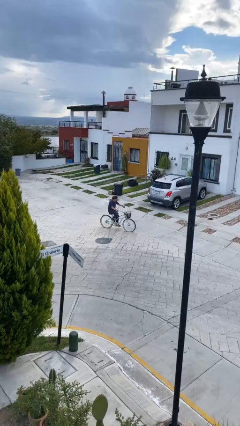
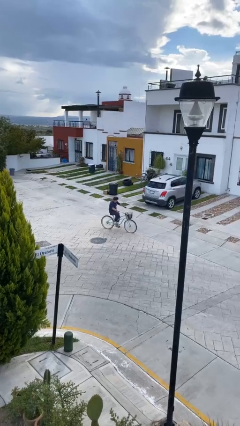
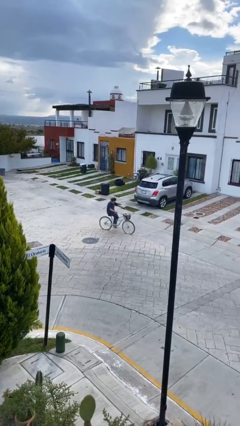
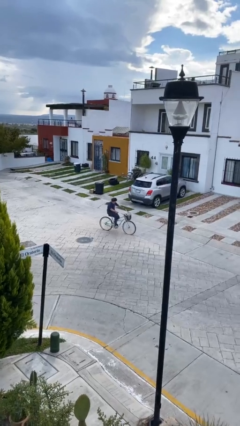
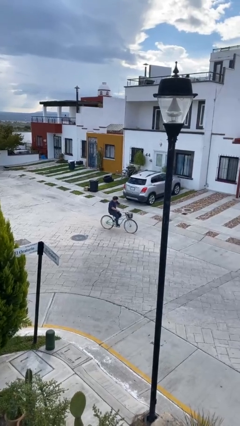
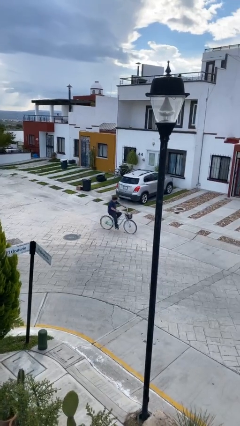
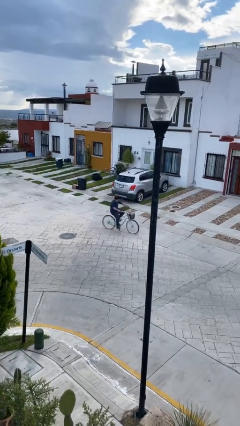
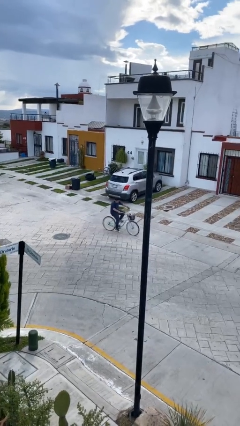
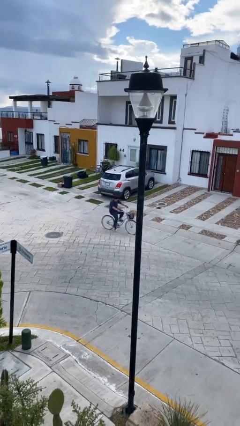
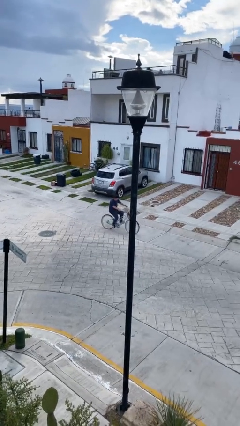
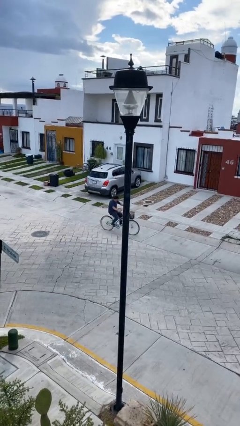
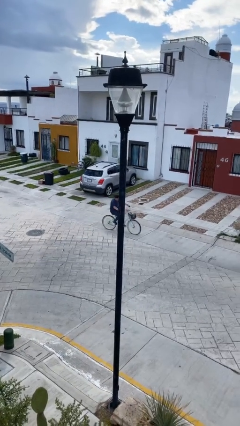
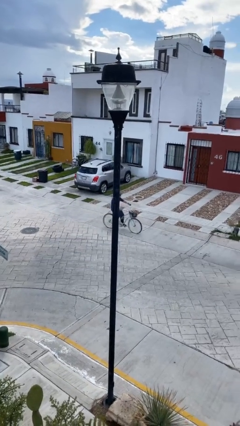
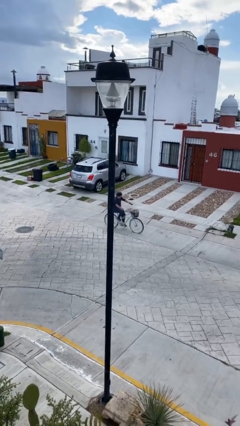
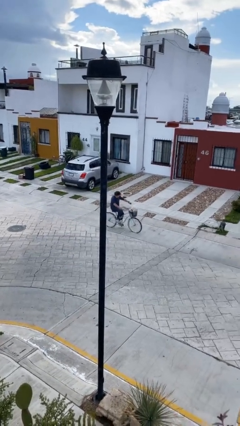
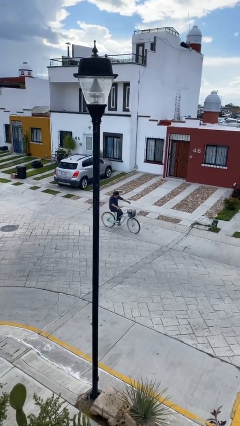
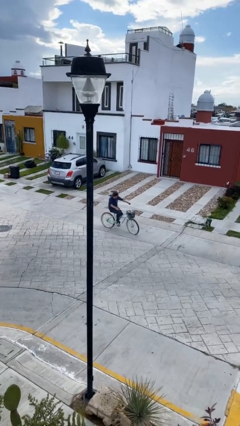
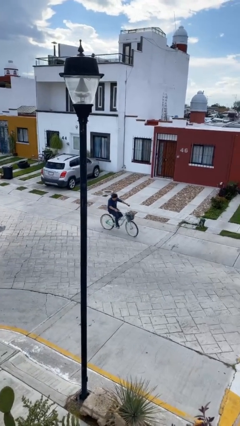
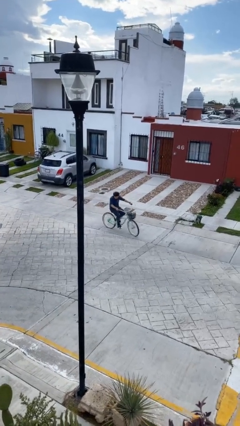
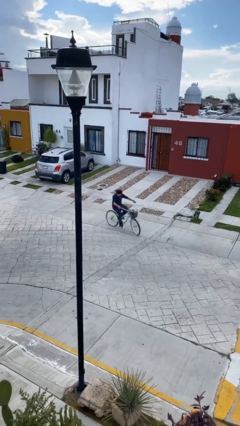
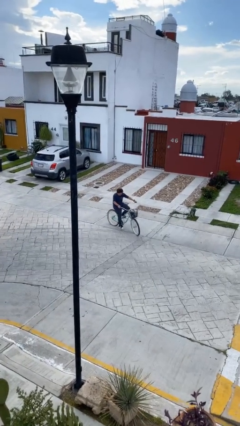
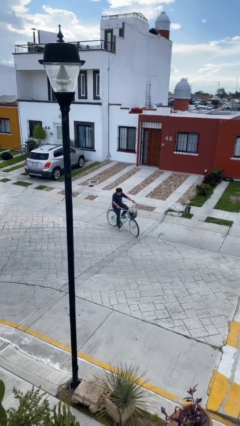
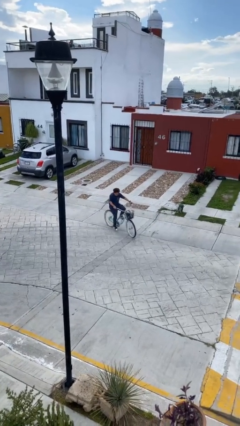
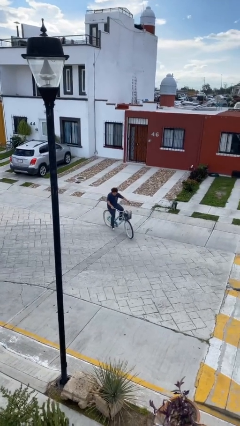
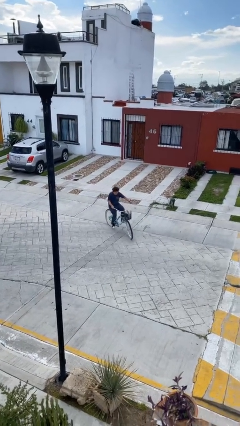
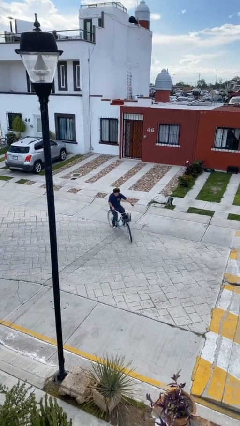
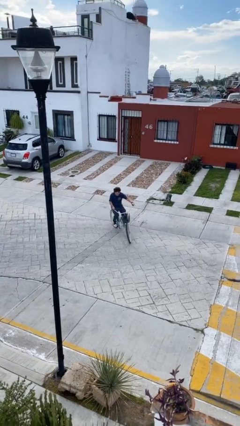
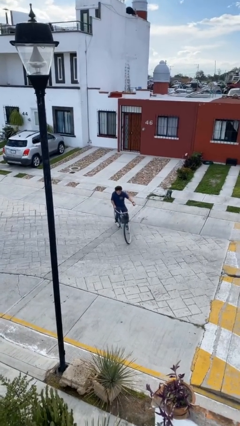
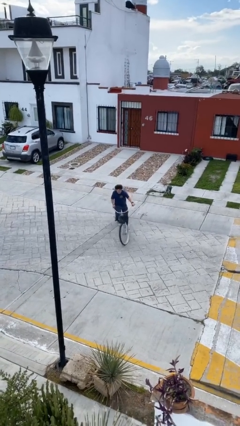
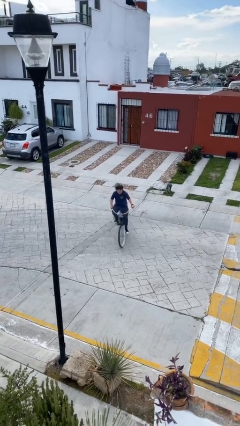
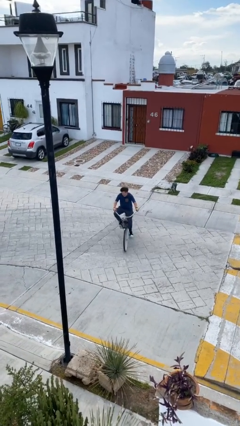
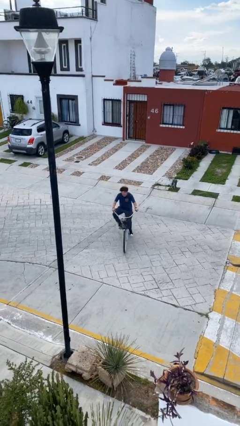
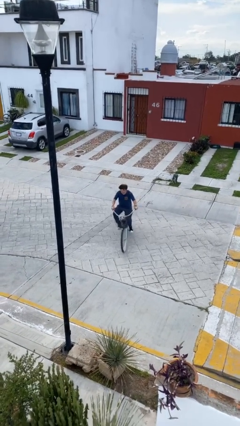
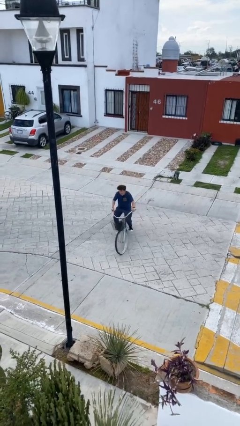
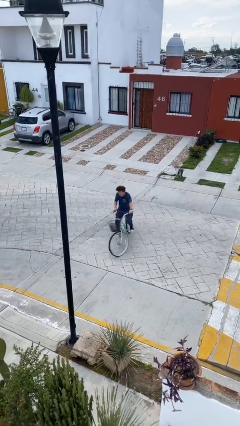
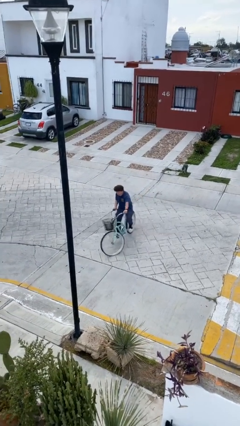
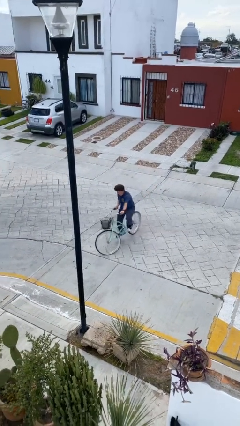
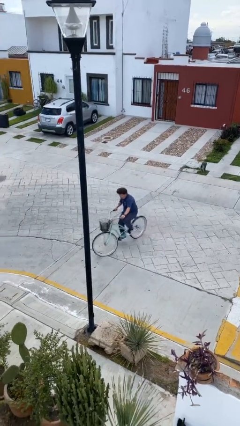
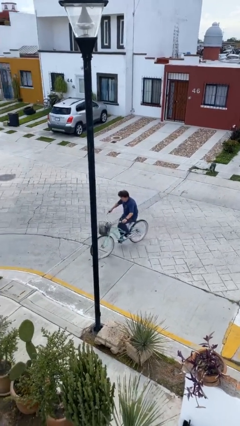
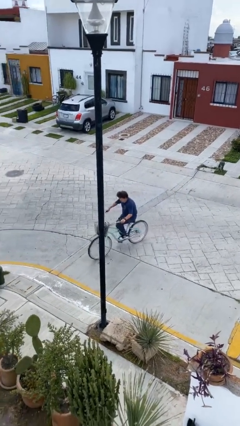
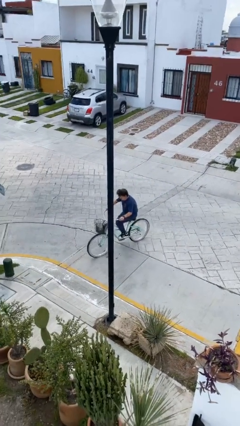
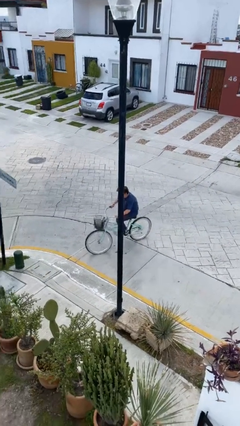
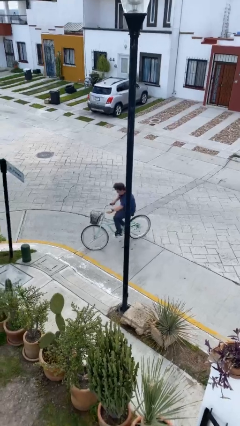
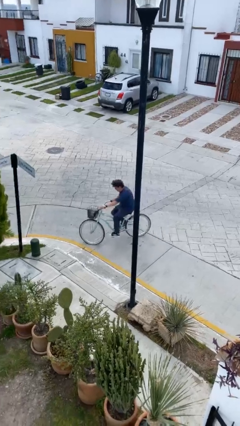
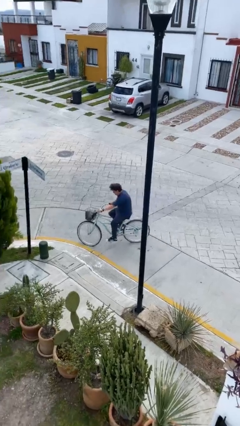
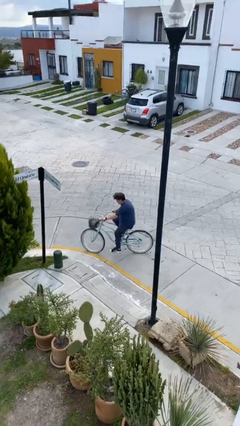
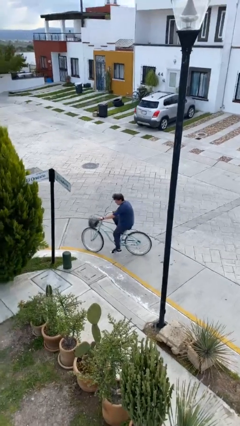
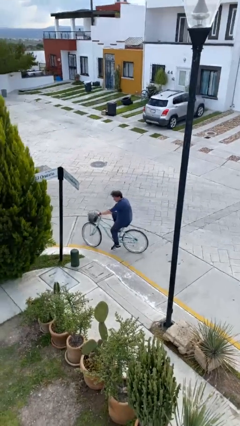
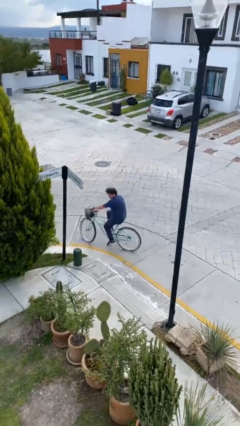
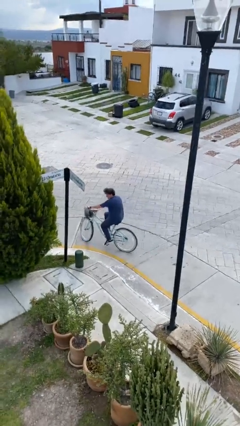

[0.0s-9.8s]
person rides bicycle

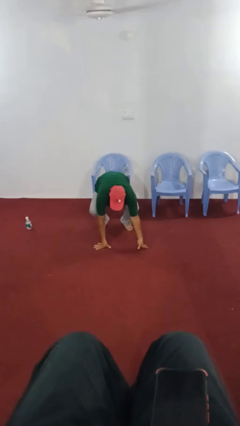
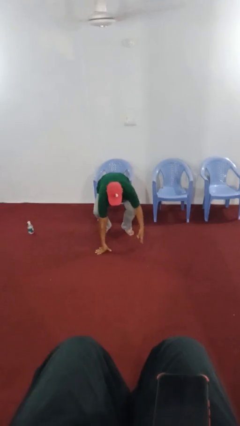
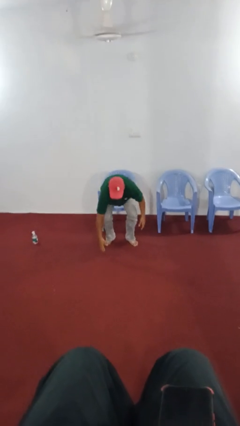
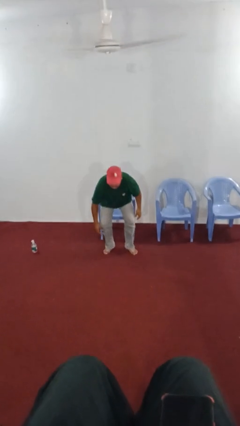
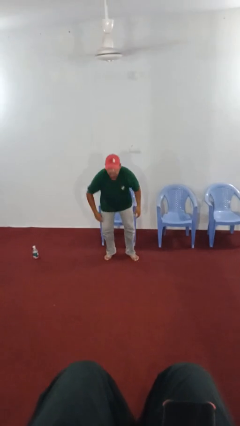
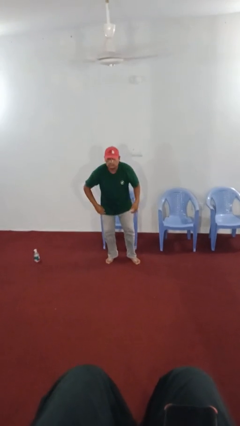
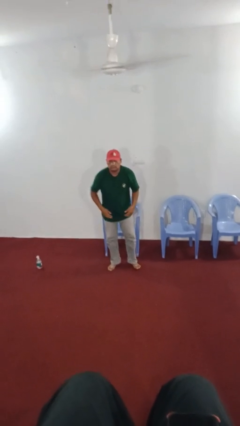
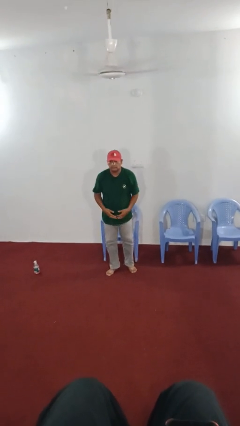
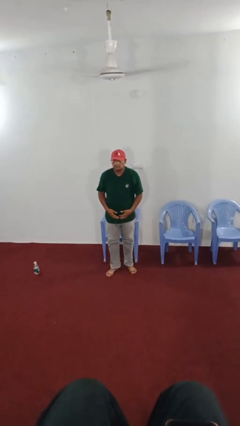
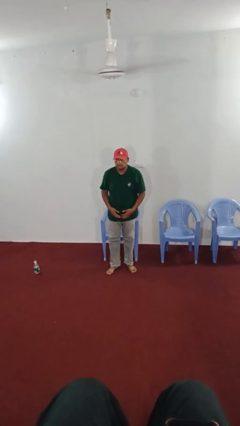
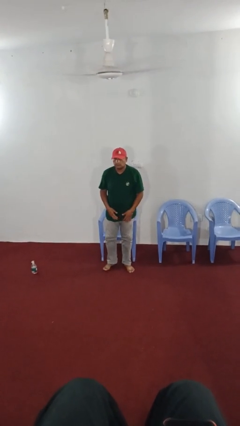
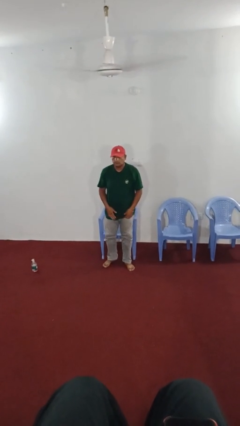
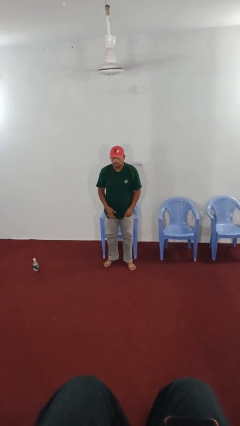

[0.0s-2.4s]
person stands up from floor

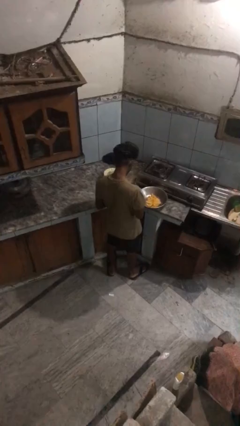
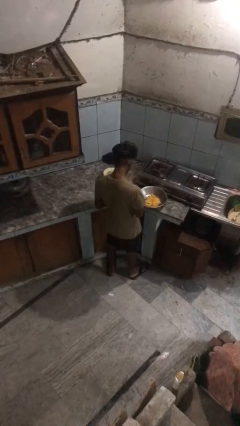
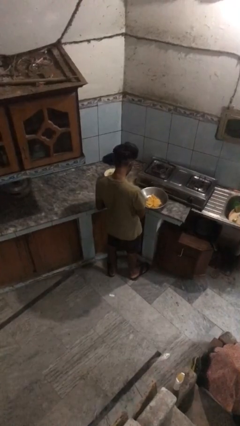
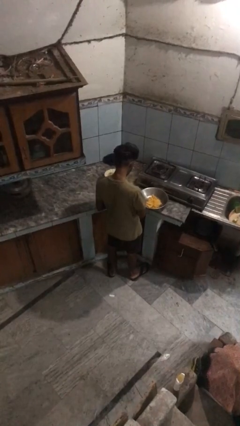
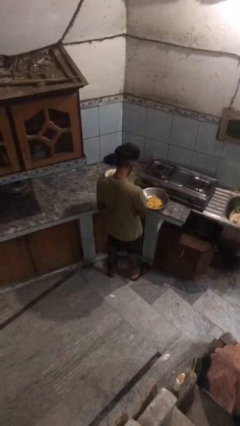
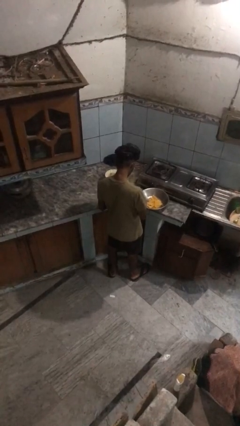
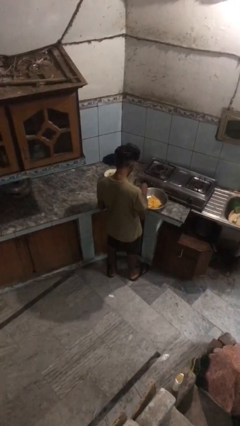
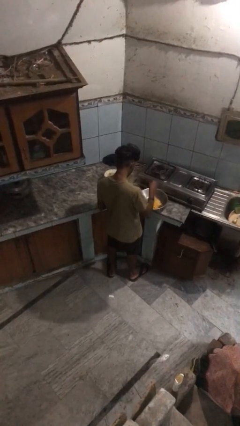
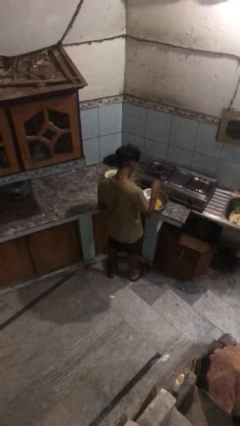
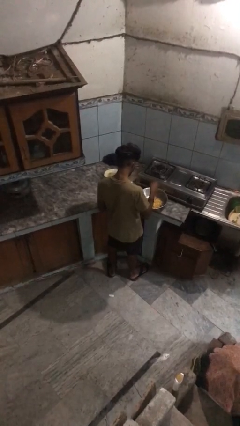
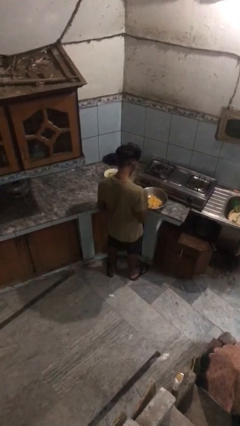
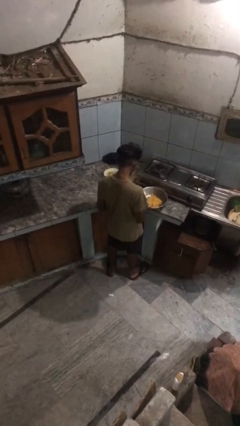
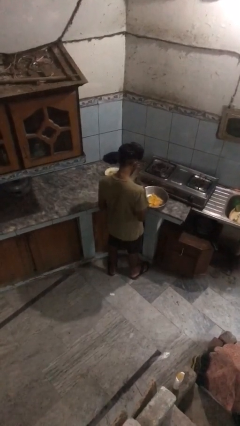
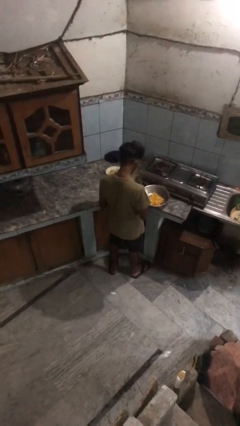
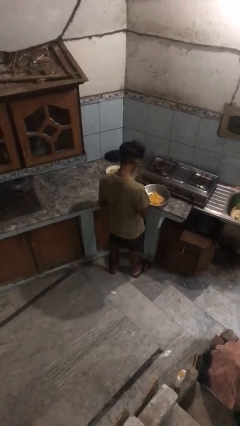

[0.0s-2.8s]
person pours into bowl

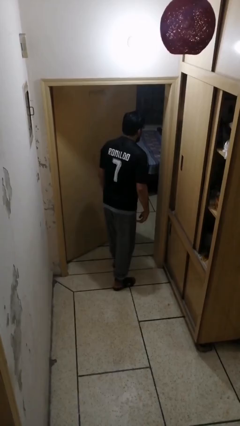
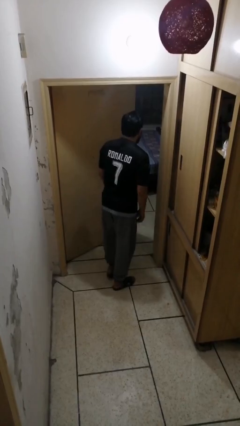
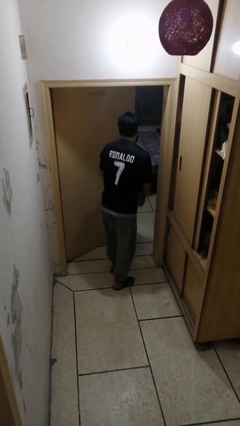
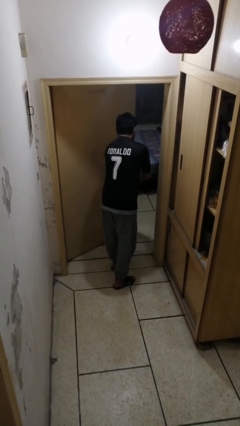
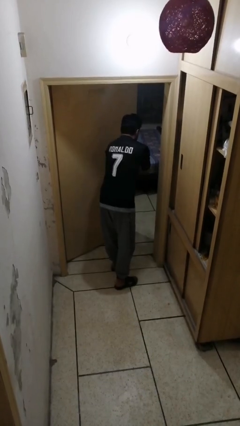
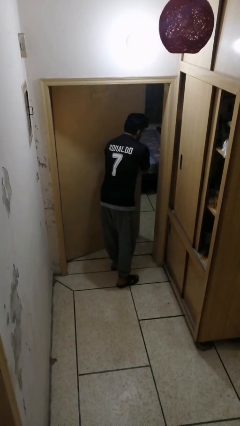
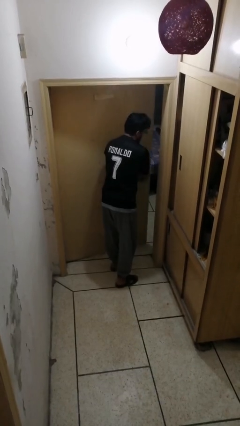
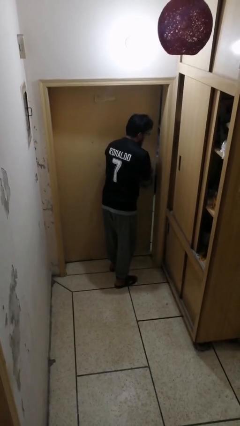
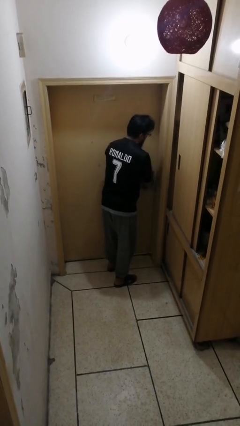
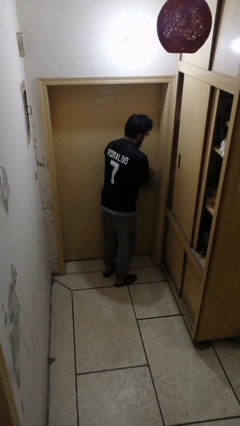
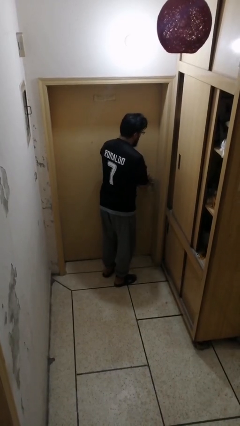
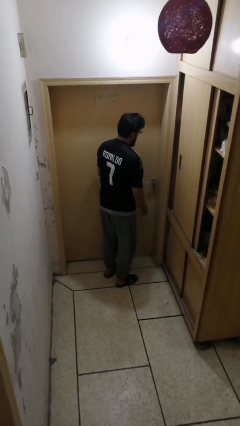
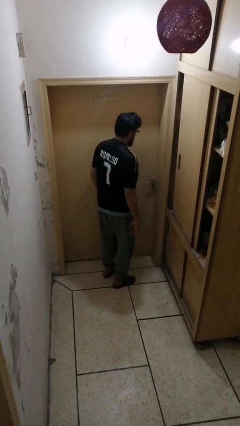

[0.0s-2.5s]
person closes facility door
